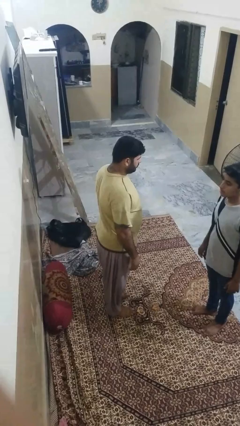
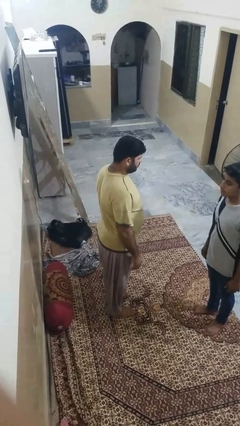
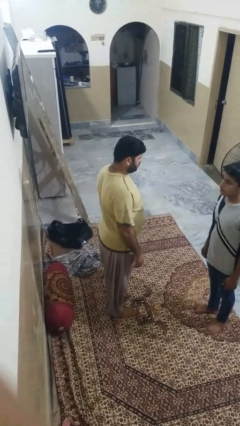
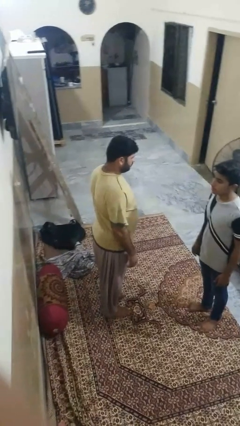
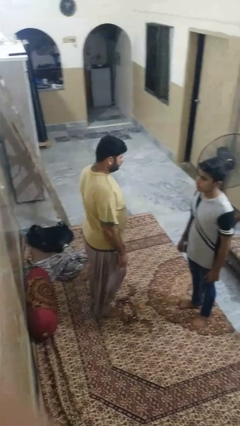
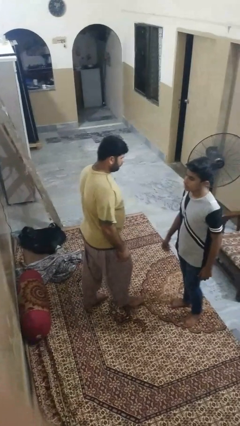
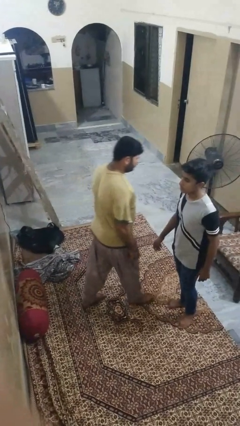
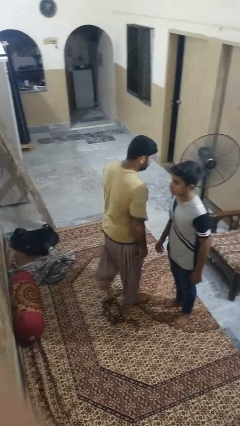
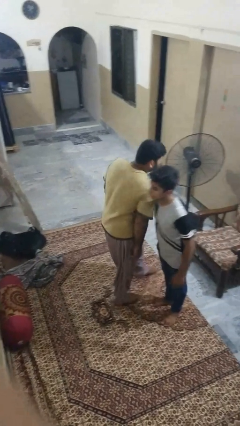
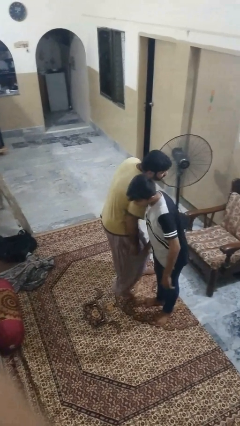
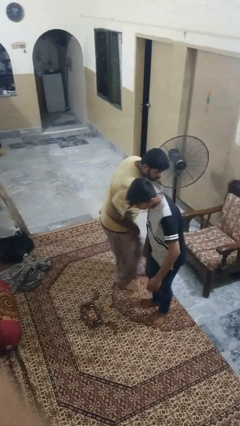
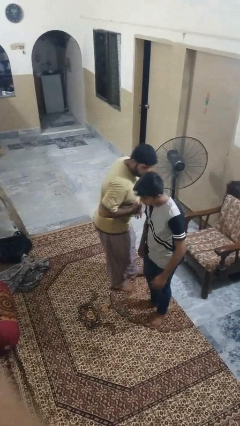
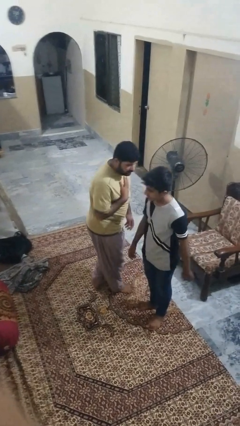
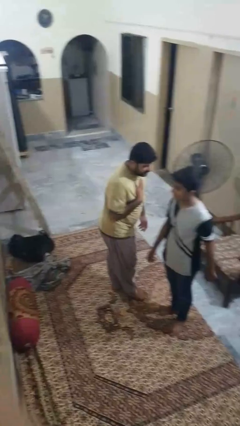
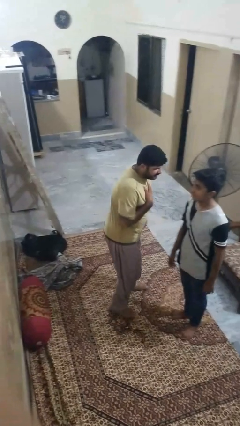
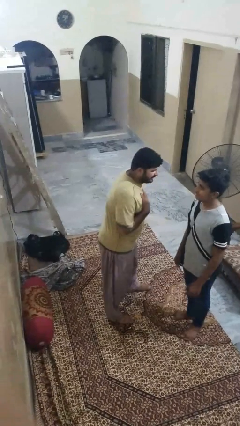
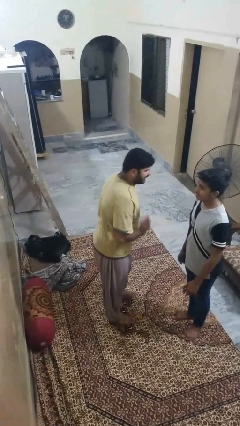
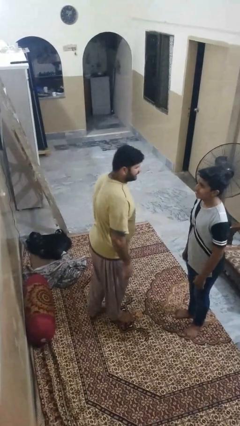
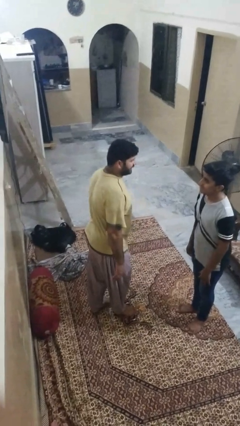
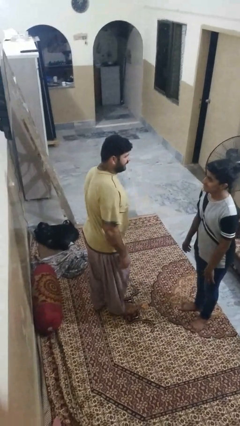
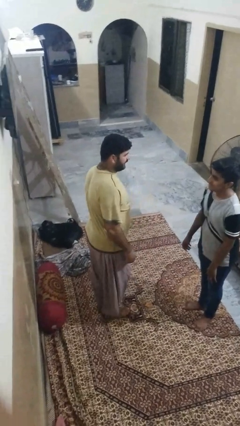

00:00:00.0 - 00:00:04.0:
person bumps into person

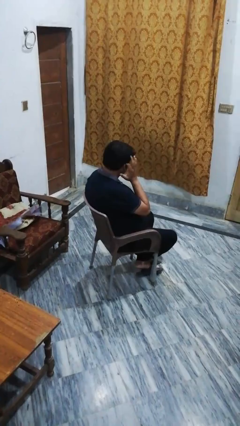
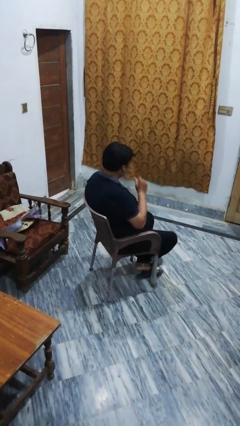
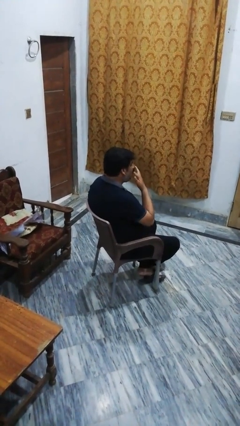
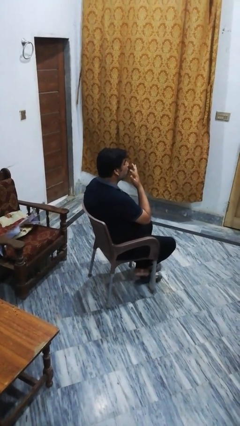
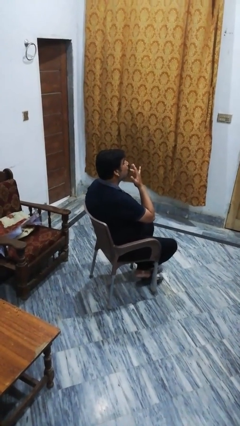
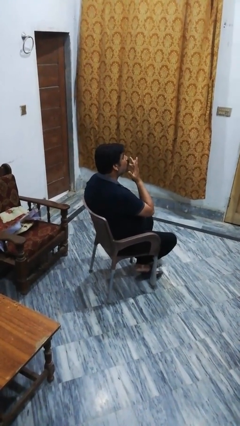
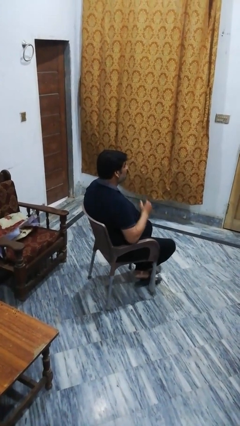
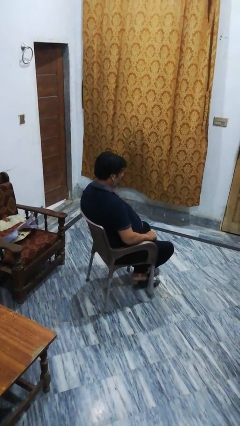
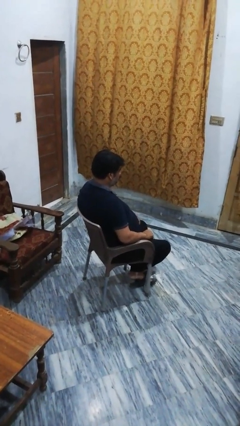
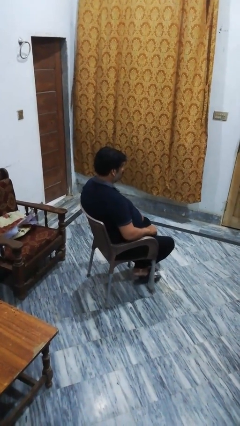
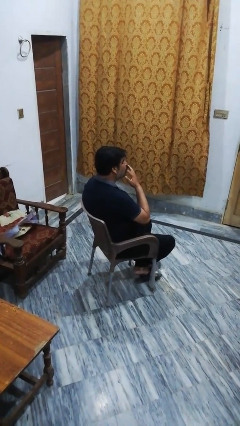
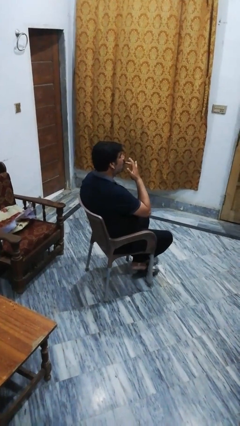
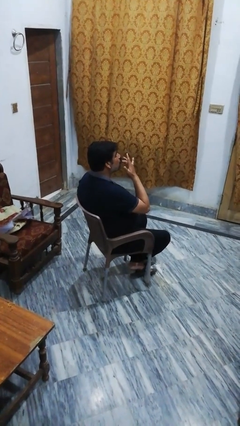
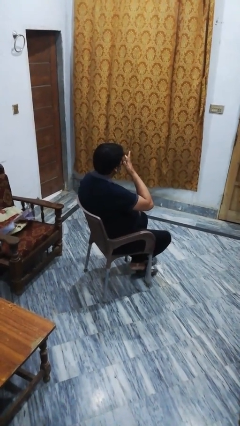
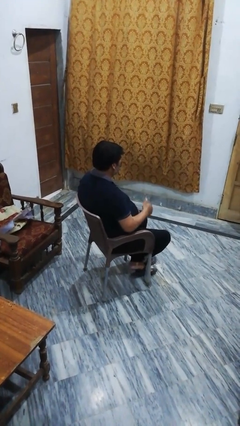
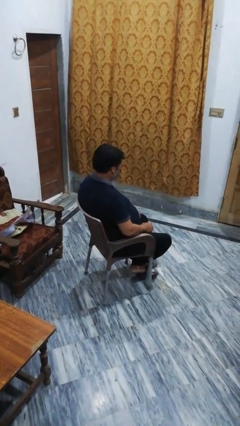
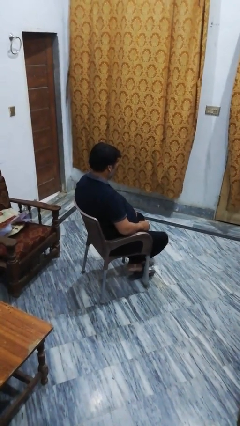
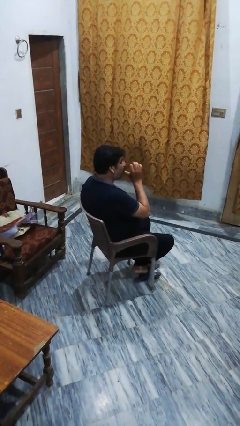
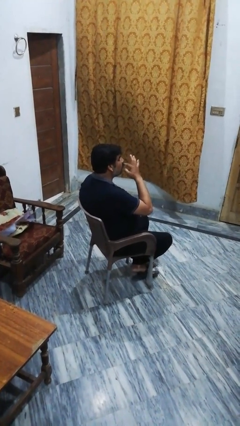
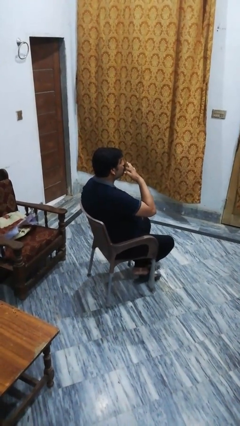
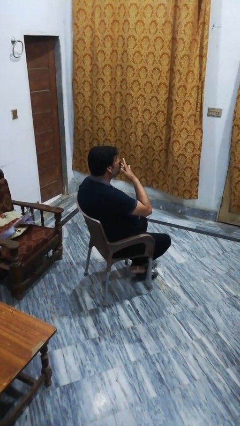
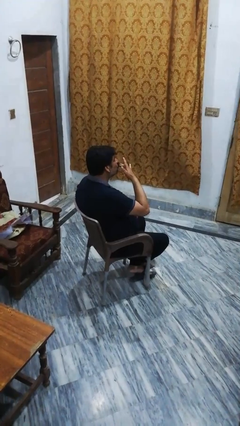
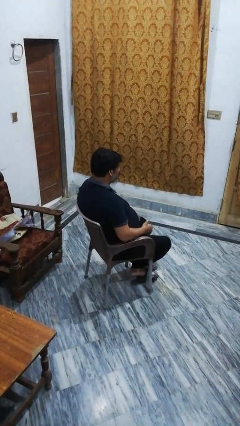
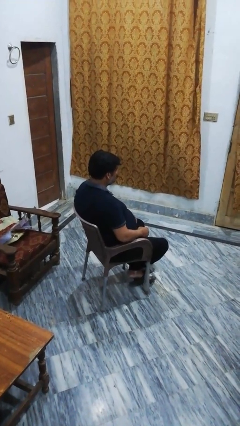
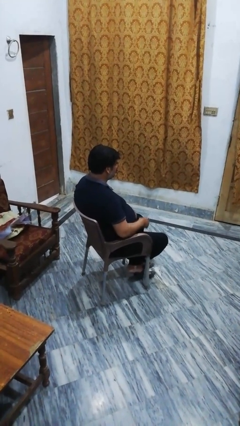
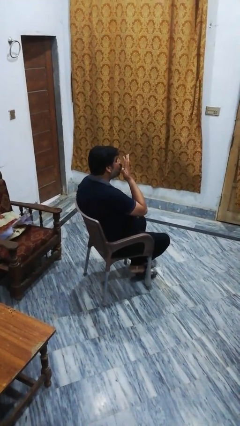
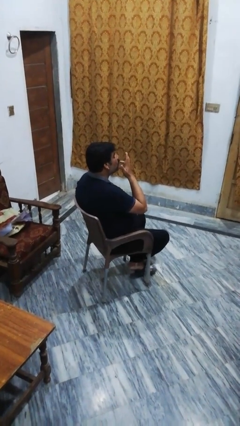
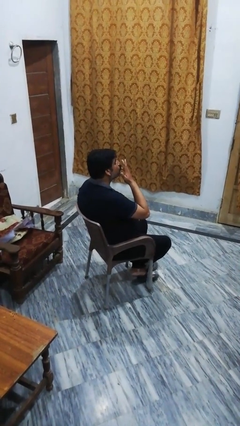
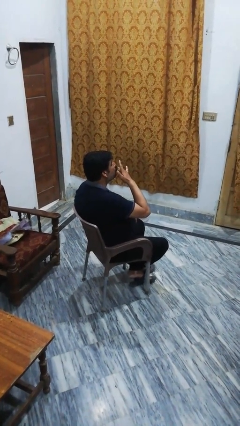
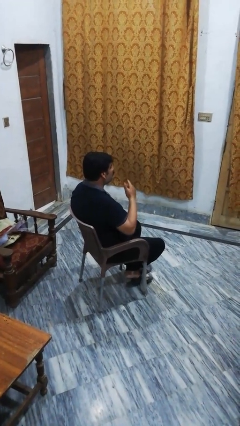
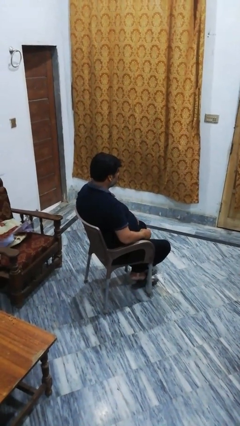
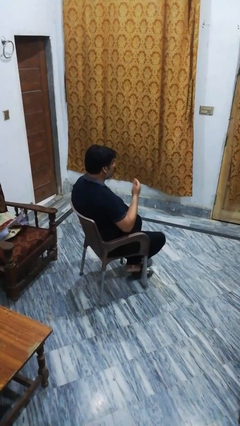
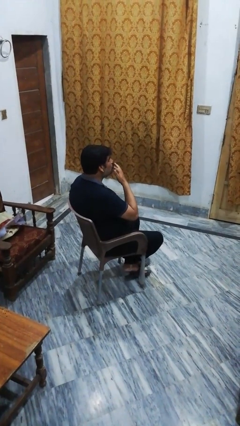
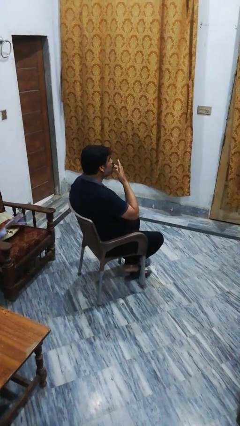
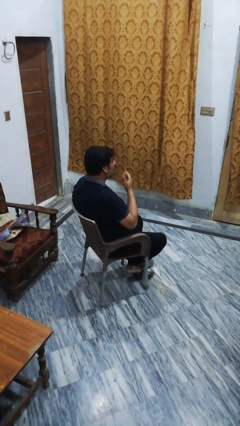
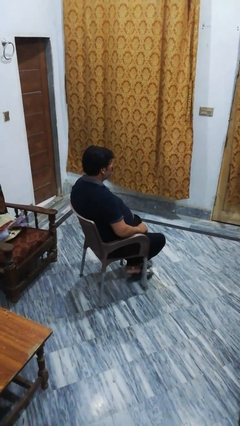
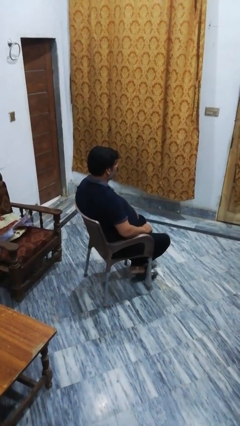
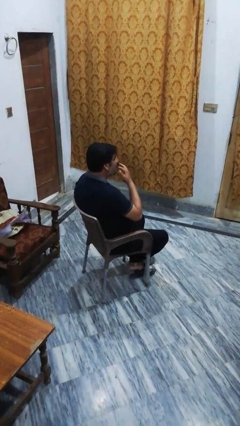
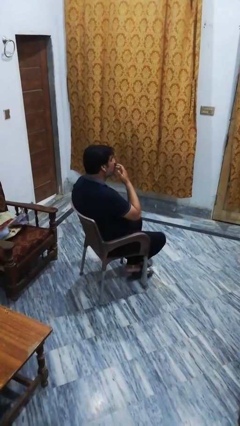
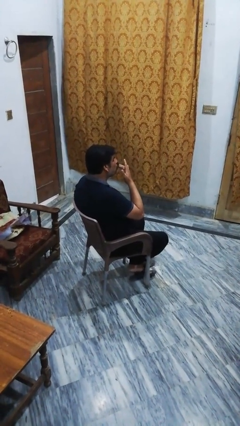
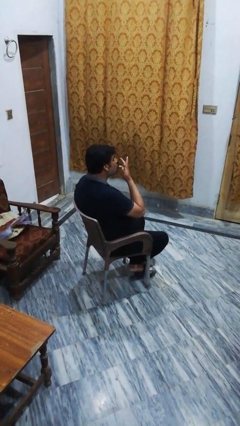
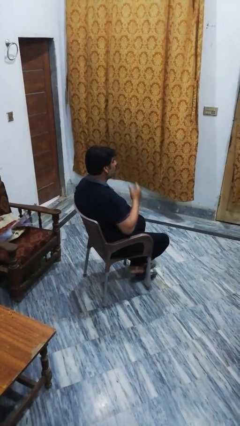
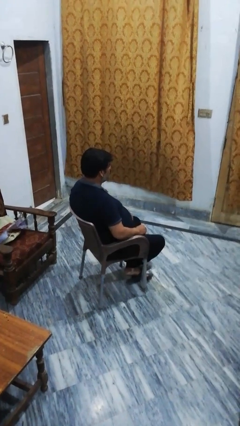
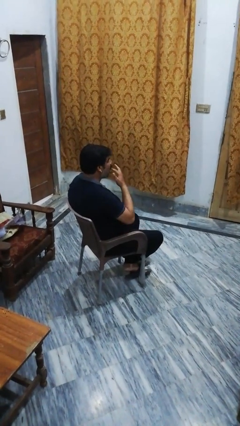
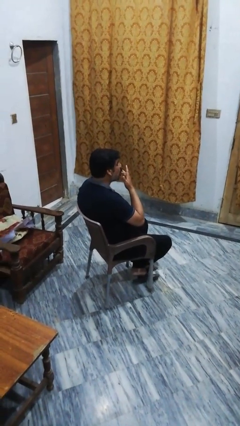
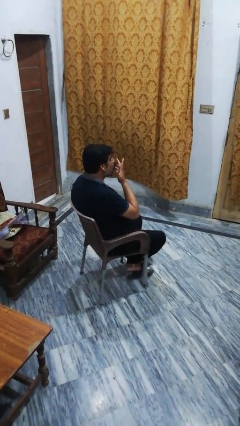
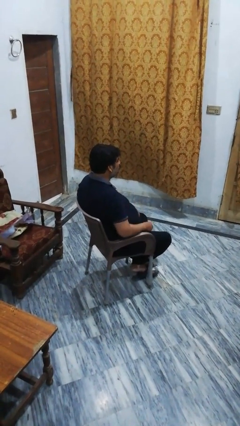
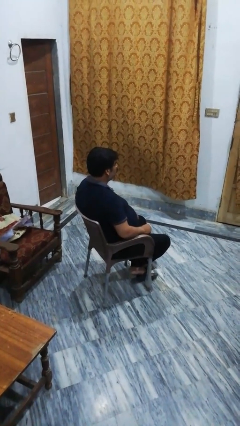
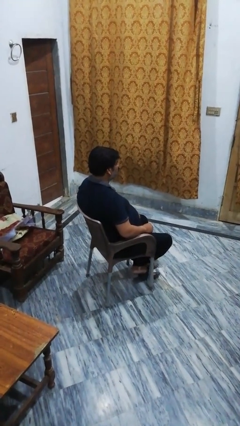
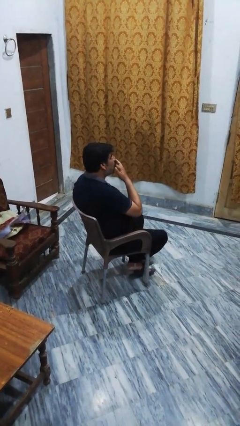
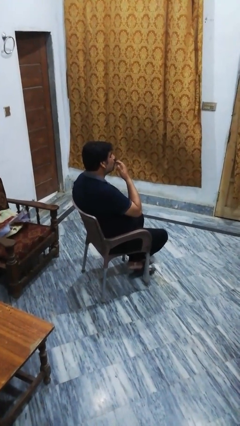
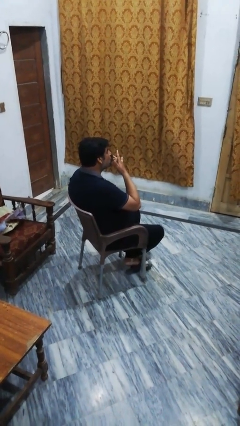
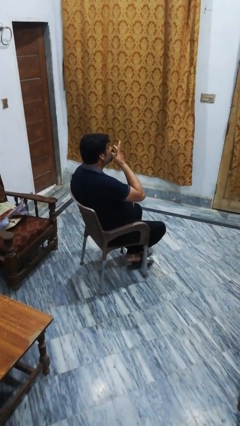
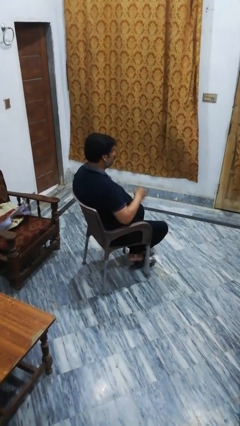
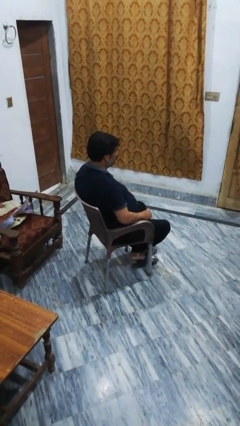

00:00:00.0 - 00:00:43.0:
person licks fingers

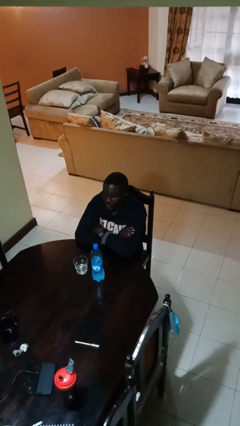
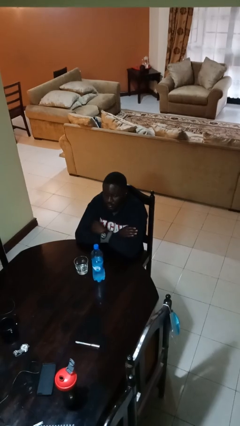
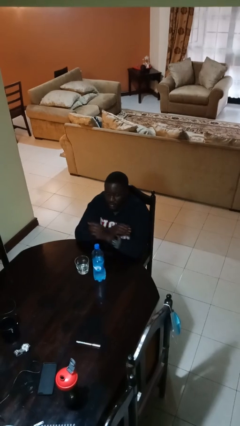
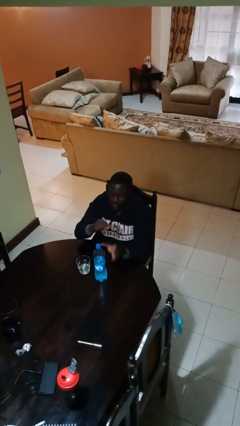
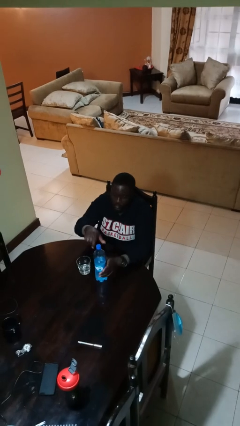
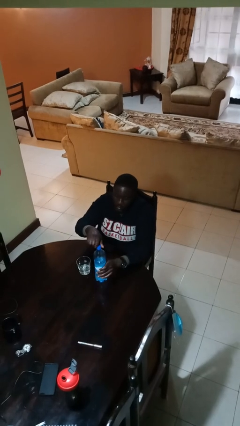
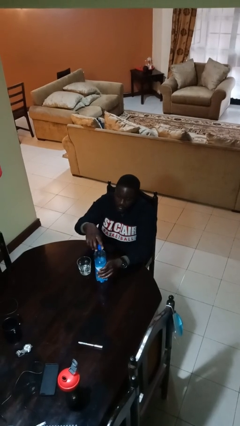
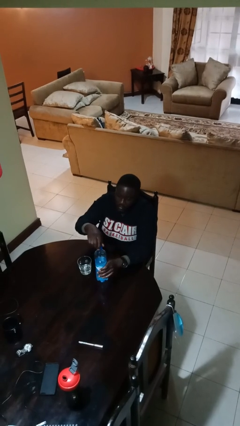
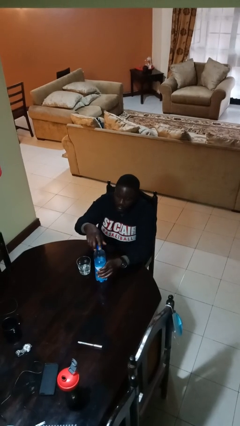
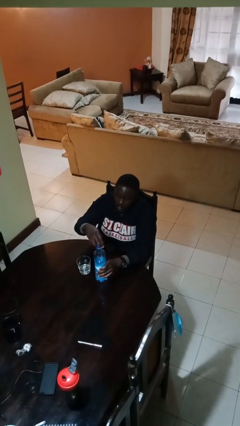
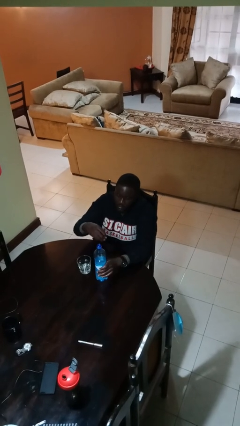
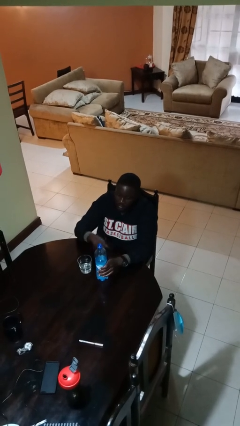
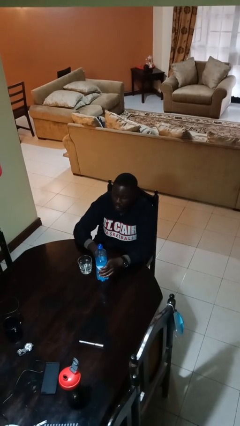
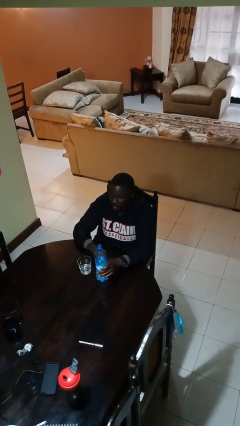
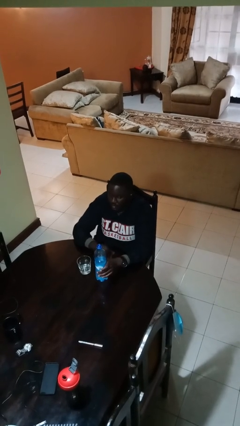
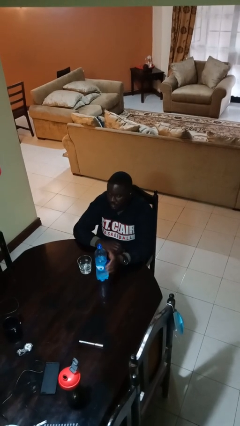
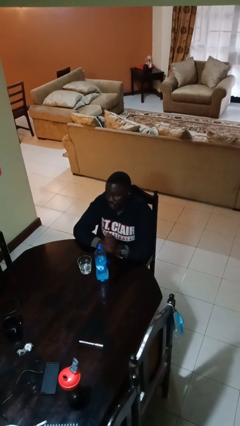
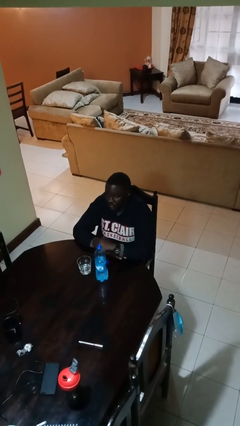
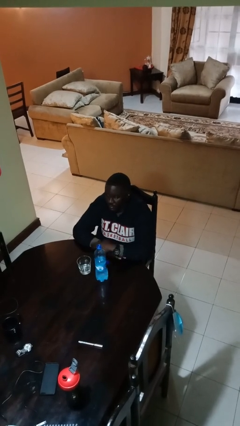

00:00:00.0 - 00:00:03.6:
person unscrews lid from bottle
